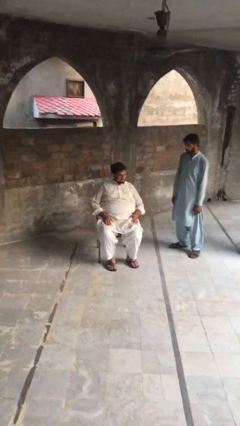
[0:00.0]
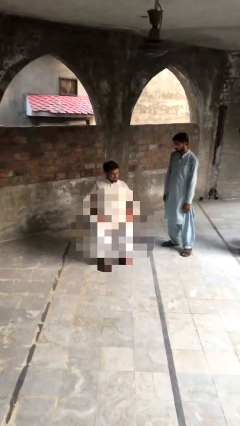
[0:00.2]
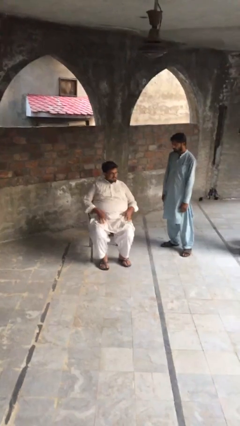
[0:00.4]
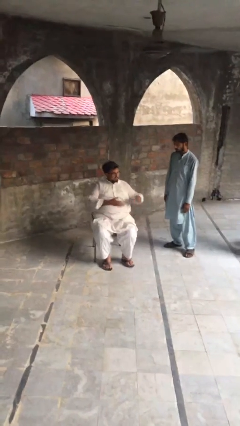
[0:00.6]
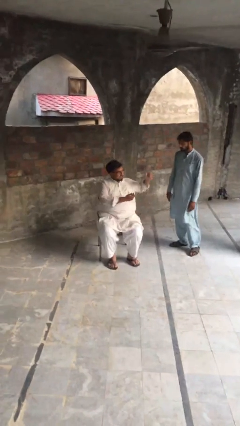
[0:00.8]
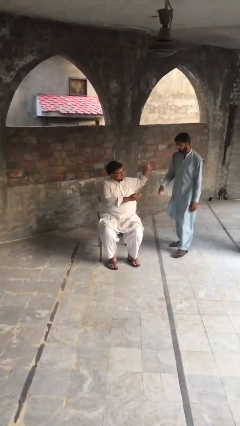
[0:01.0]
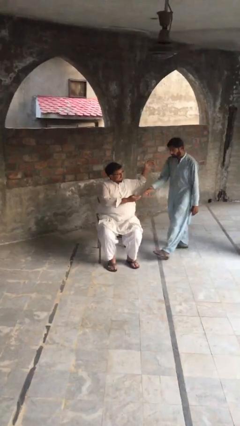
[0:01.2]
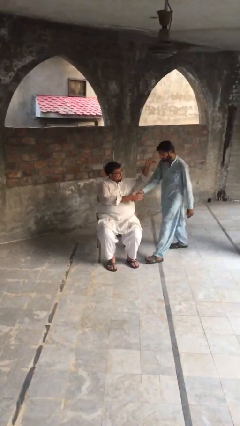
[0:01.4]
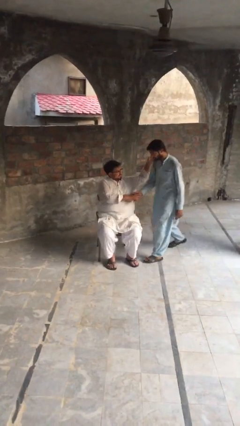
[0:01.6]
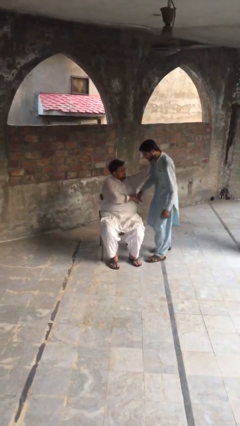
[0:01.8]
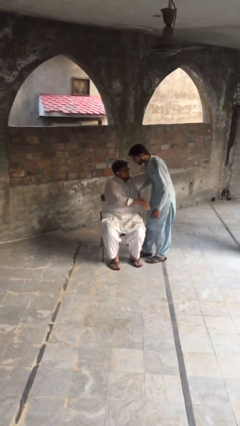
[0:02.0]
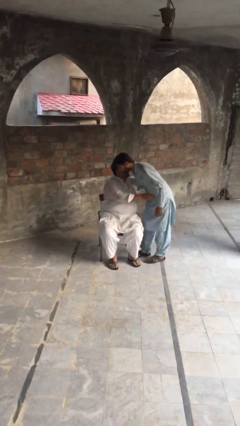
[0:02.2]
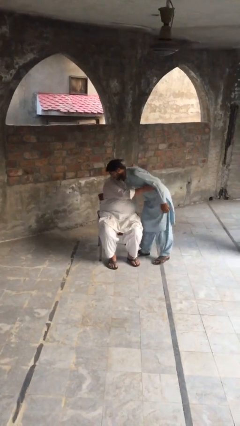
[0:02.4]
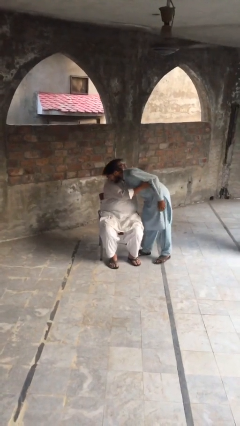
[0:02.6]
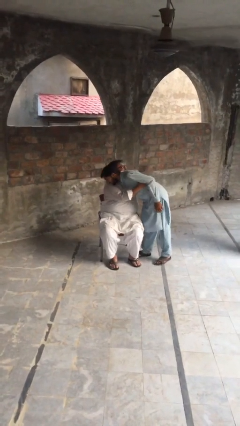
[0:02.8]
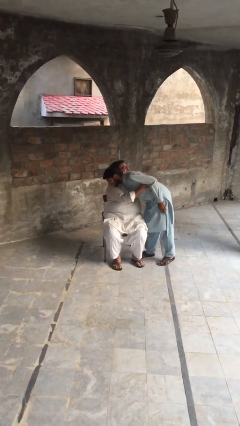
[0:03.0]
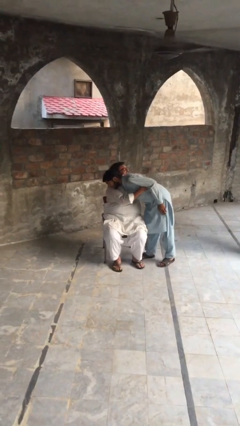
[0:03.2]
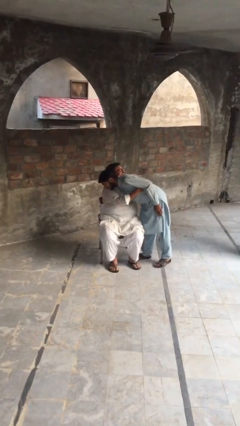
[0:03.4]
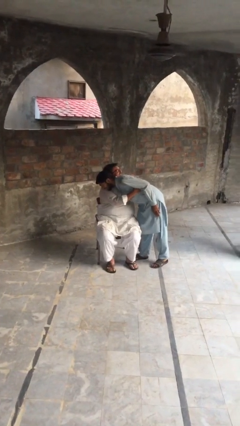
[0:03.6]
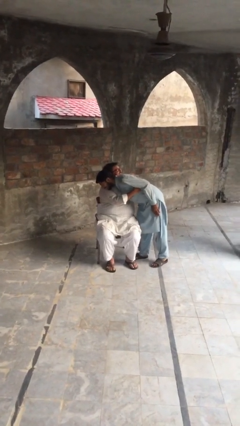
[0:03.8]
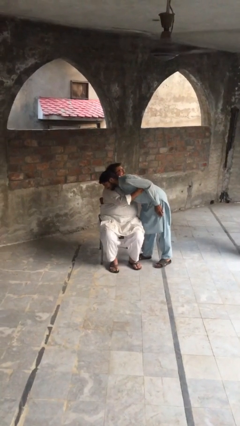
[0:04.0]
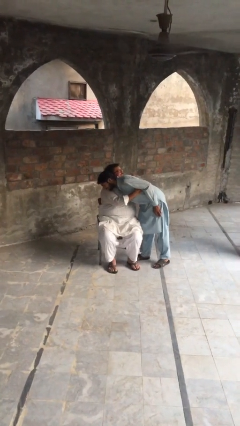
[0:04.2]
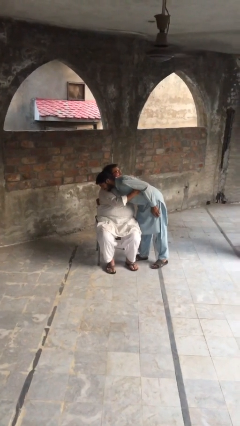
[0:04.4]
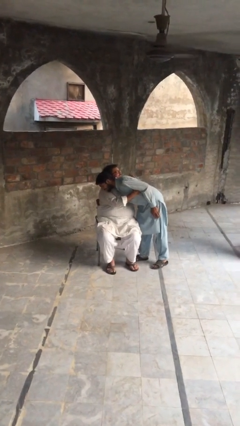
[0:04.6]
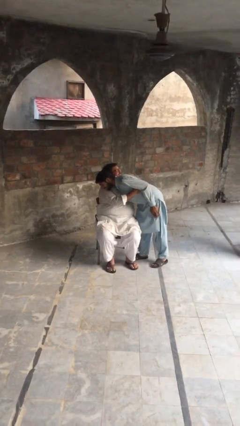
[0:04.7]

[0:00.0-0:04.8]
person embraces person

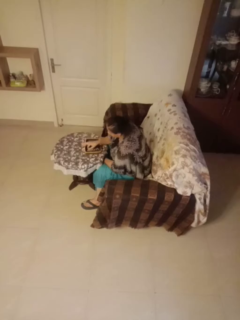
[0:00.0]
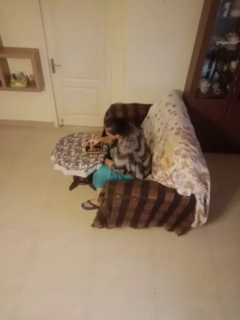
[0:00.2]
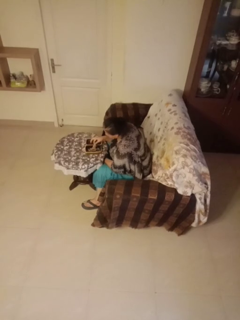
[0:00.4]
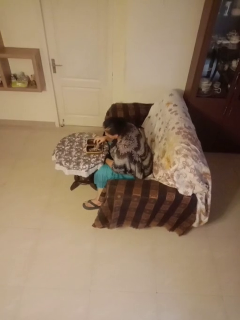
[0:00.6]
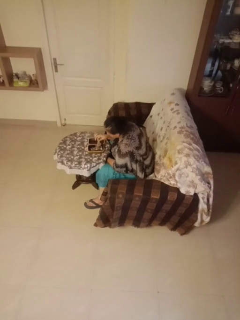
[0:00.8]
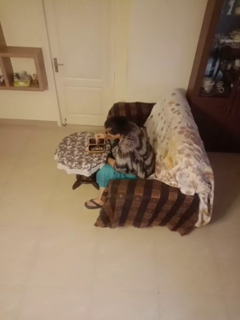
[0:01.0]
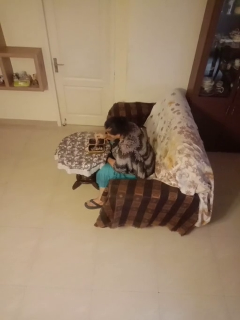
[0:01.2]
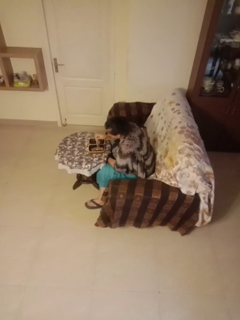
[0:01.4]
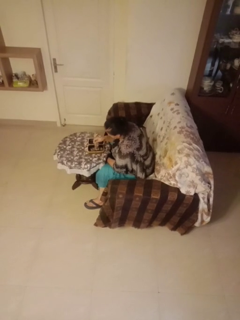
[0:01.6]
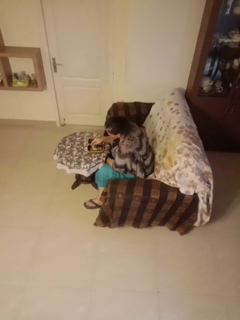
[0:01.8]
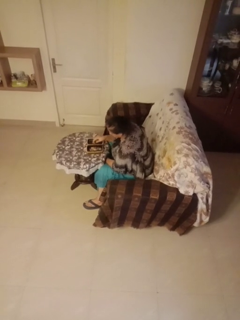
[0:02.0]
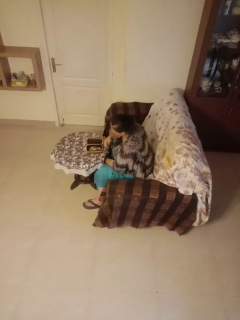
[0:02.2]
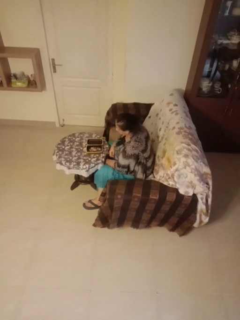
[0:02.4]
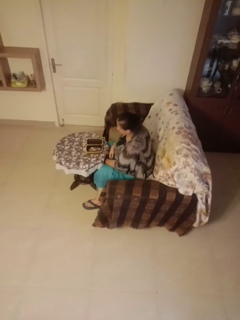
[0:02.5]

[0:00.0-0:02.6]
person searches jewelry box

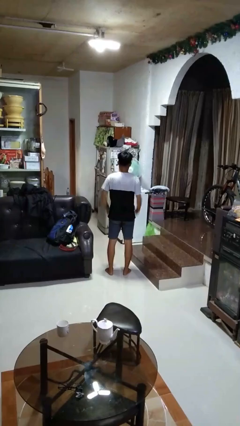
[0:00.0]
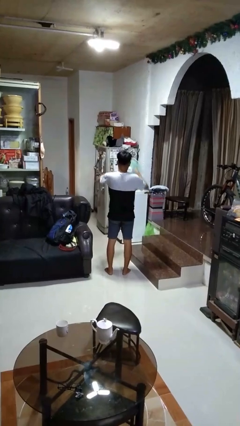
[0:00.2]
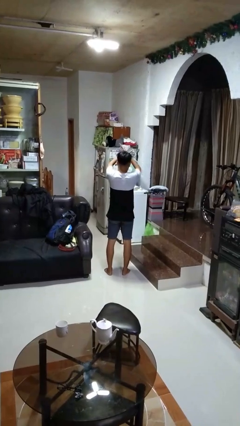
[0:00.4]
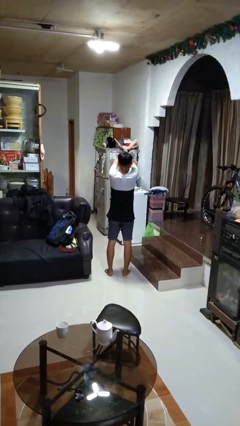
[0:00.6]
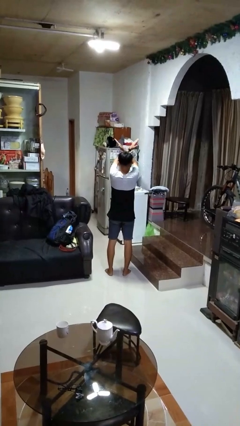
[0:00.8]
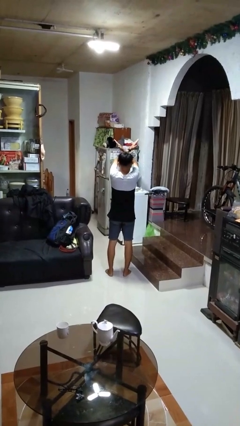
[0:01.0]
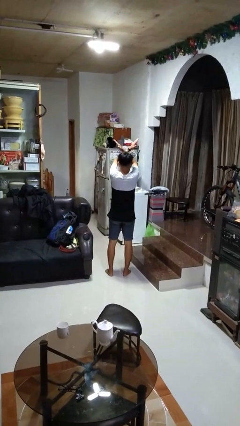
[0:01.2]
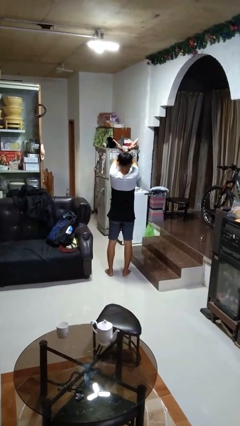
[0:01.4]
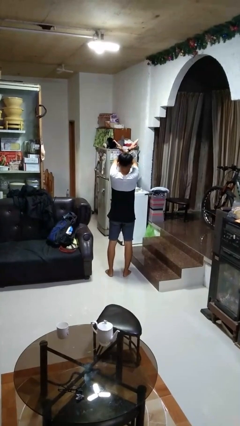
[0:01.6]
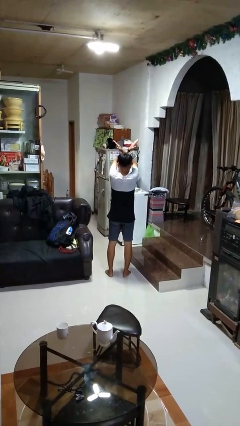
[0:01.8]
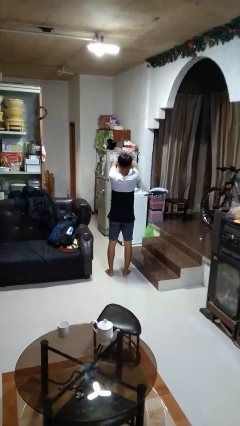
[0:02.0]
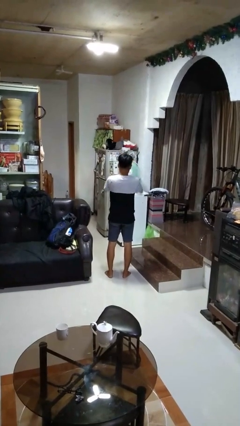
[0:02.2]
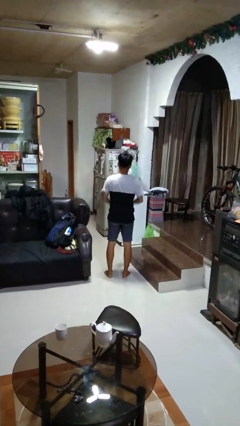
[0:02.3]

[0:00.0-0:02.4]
person gestures arms x

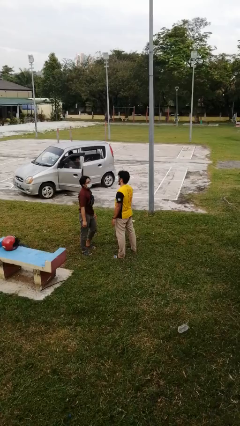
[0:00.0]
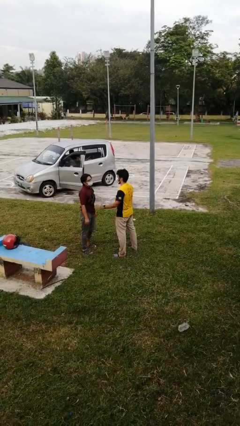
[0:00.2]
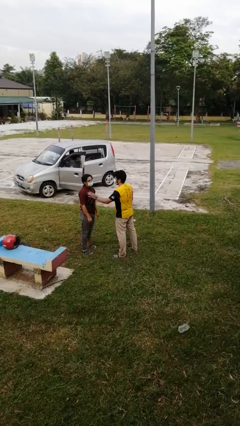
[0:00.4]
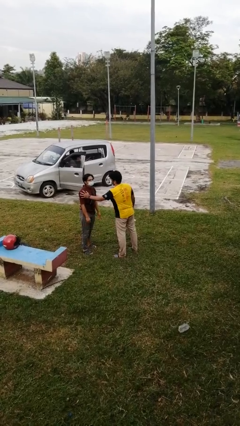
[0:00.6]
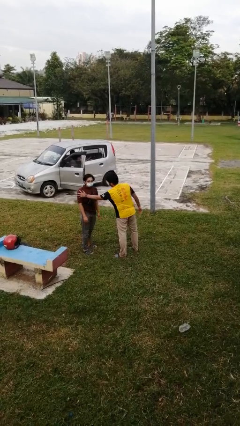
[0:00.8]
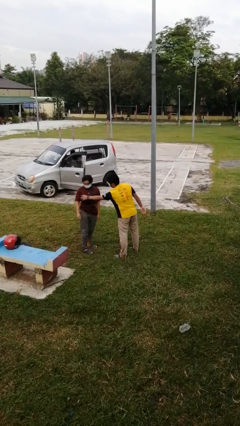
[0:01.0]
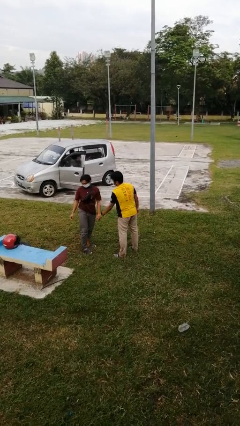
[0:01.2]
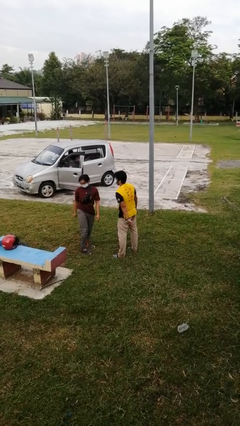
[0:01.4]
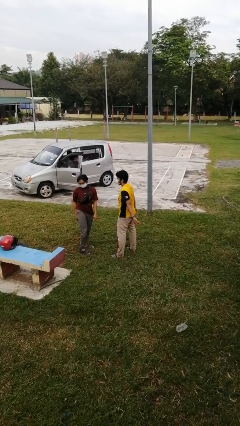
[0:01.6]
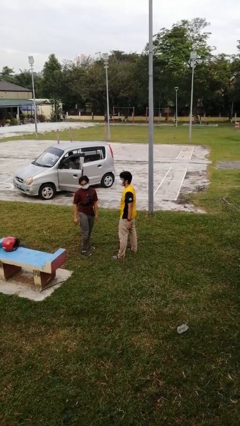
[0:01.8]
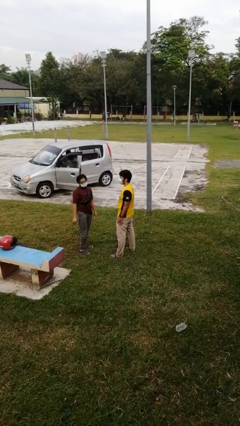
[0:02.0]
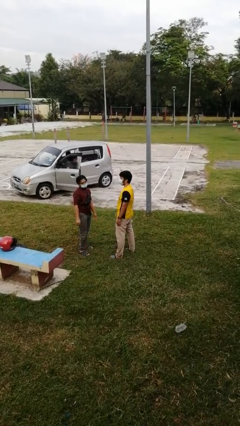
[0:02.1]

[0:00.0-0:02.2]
person shoves person

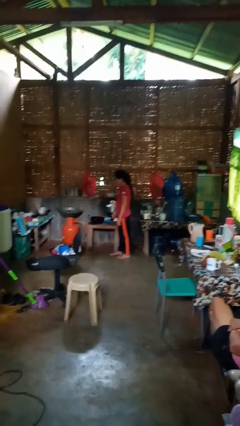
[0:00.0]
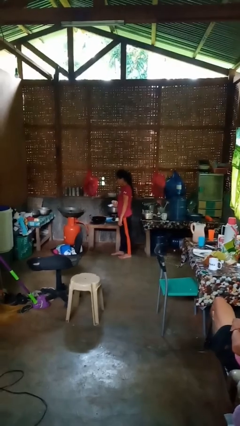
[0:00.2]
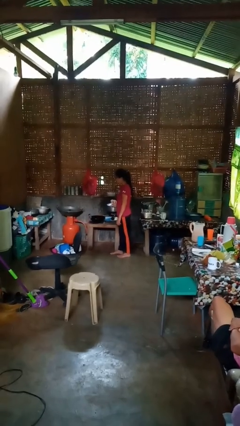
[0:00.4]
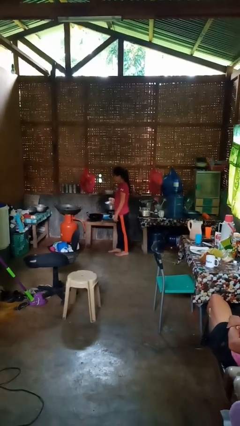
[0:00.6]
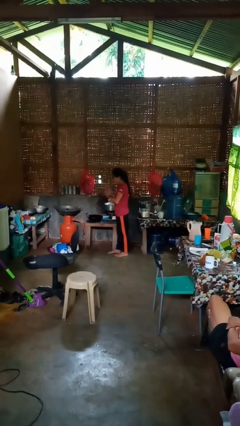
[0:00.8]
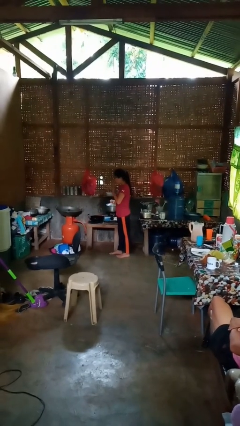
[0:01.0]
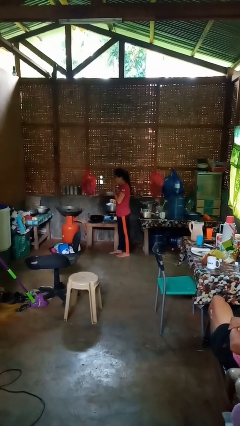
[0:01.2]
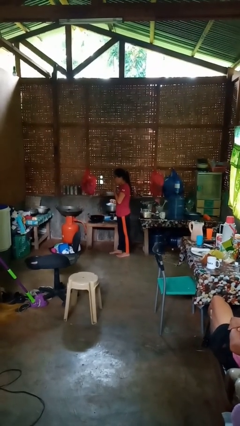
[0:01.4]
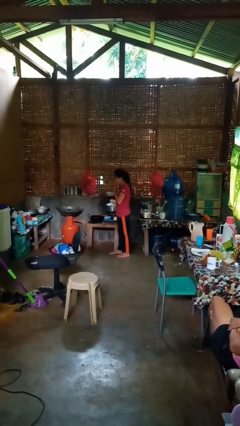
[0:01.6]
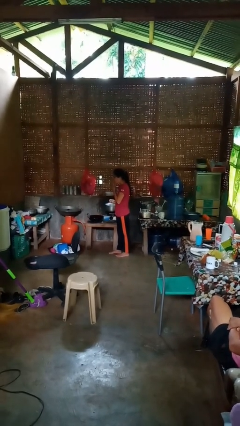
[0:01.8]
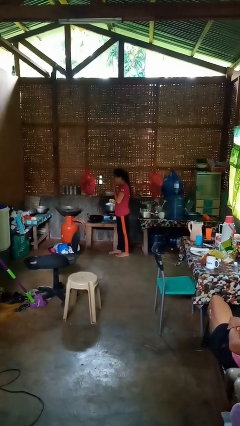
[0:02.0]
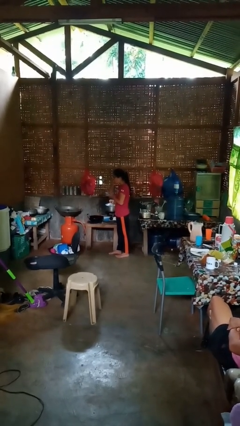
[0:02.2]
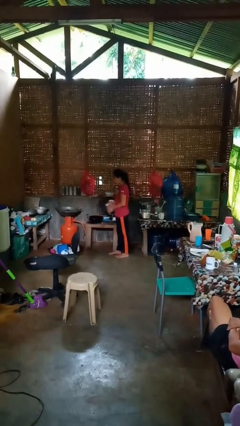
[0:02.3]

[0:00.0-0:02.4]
person burns hand

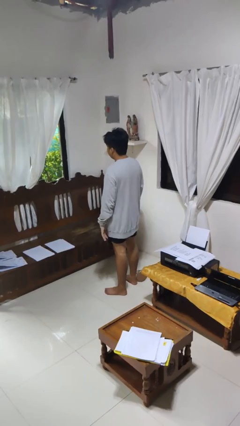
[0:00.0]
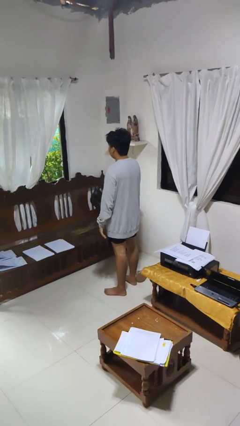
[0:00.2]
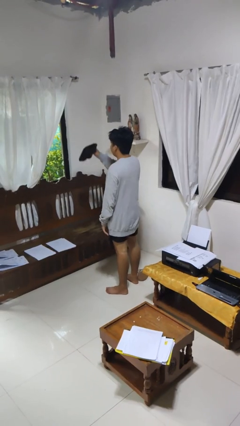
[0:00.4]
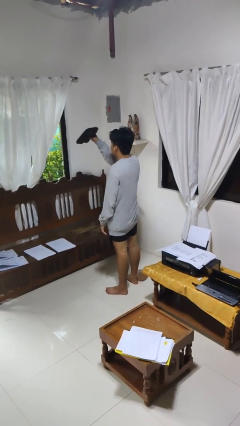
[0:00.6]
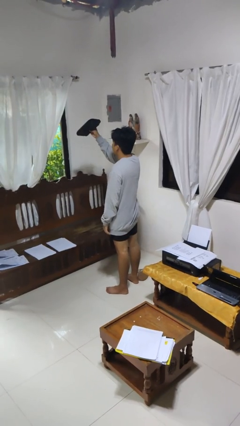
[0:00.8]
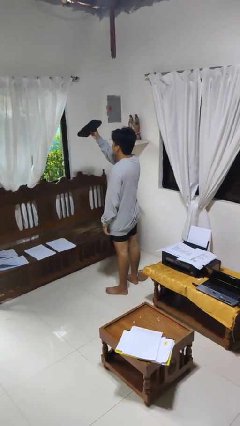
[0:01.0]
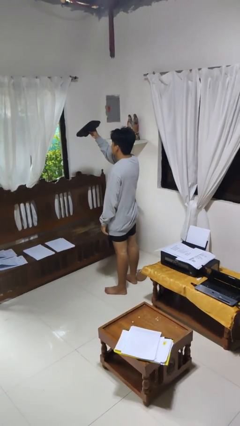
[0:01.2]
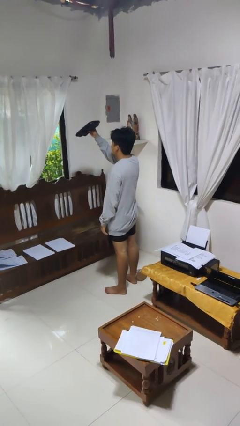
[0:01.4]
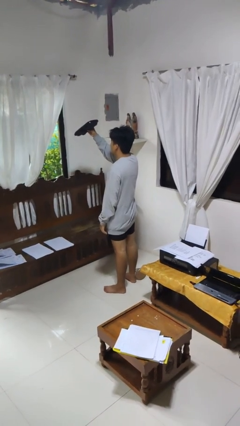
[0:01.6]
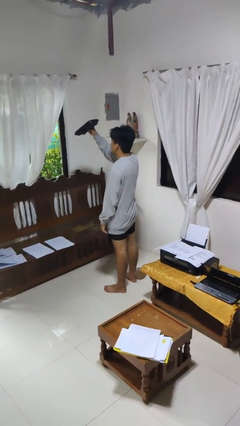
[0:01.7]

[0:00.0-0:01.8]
person holds object above head

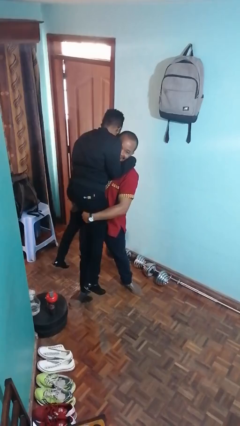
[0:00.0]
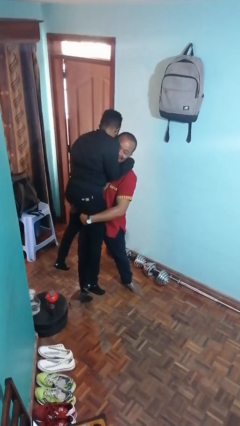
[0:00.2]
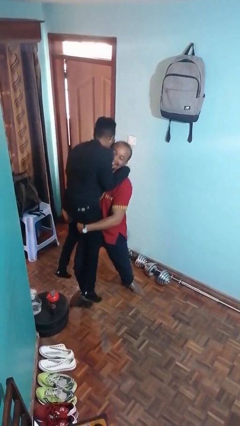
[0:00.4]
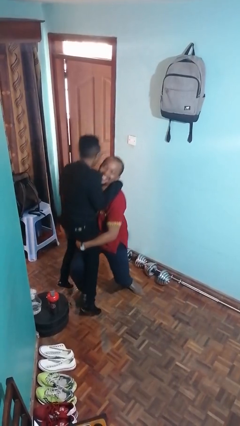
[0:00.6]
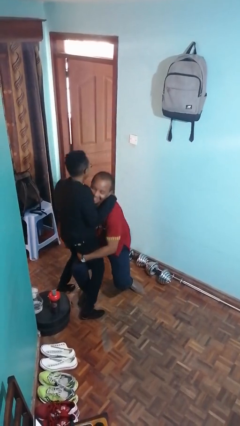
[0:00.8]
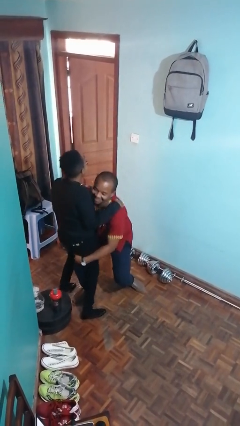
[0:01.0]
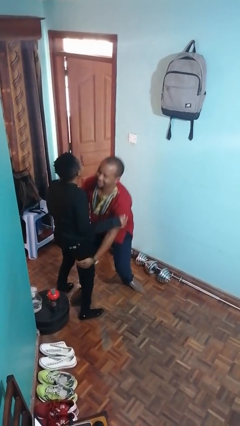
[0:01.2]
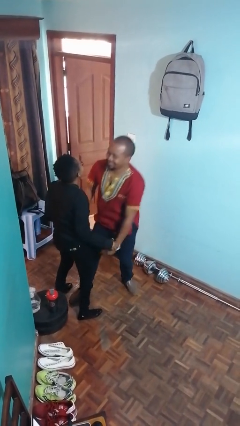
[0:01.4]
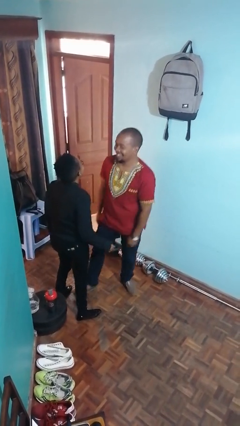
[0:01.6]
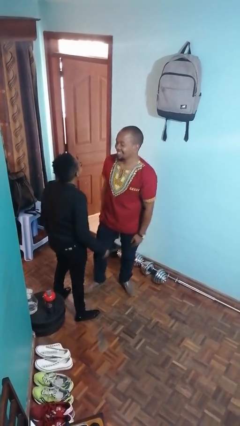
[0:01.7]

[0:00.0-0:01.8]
person puts down person
